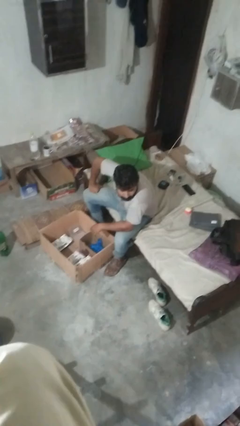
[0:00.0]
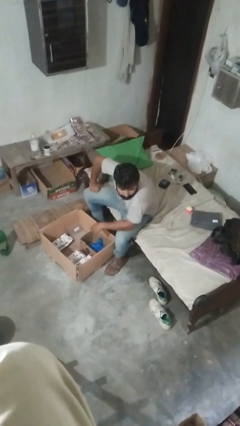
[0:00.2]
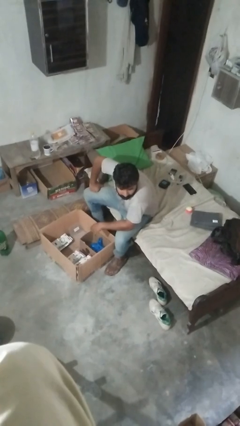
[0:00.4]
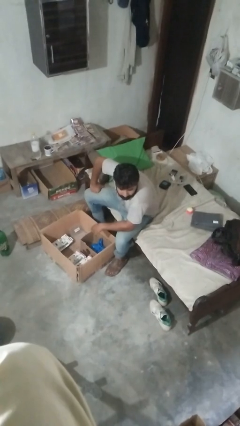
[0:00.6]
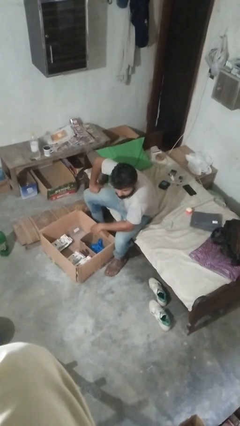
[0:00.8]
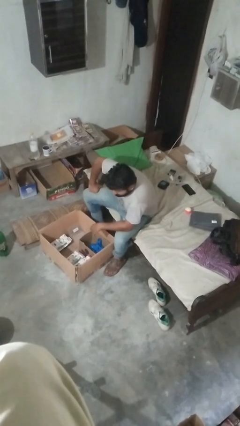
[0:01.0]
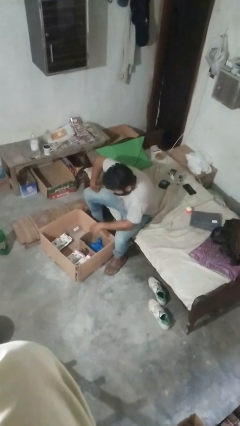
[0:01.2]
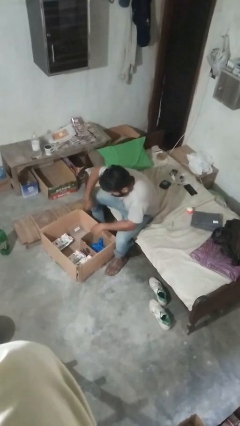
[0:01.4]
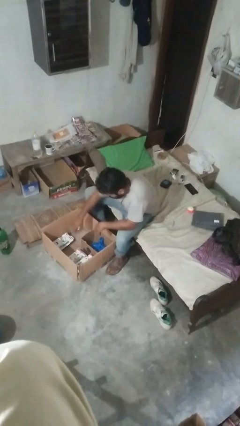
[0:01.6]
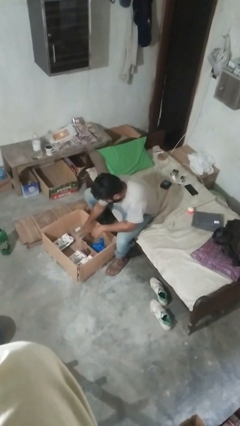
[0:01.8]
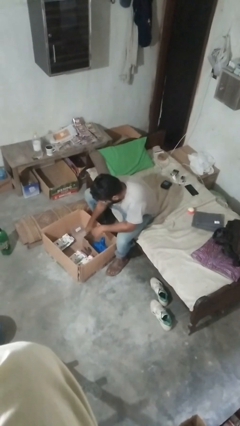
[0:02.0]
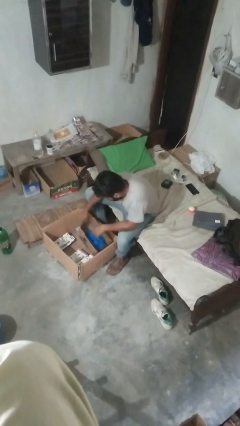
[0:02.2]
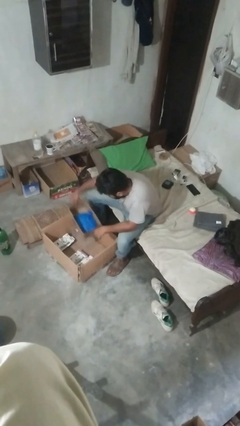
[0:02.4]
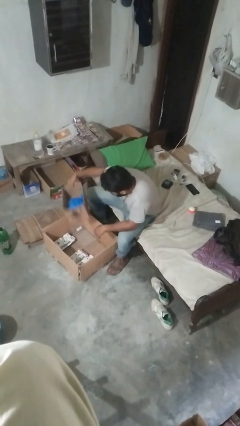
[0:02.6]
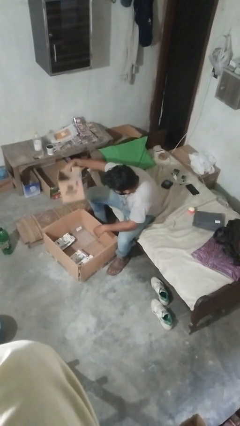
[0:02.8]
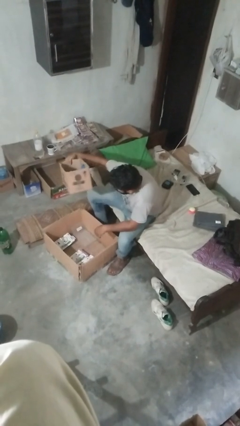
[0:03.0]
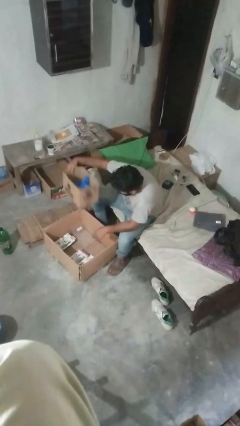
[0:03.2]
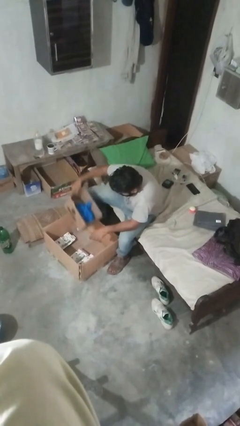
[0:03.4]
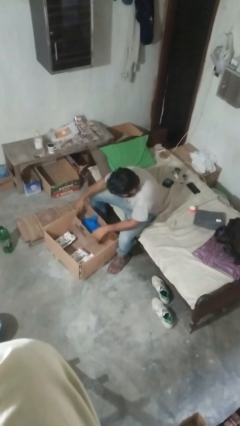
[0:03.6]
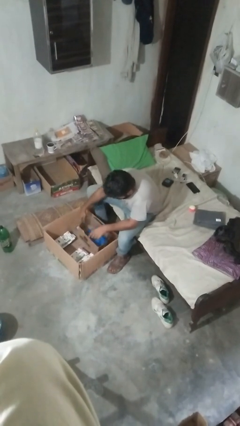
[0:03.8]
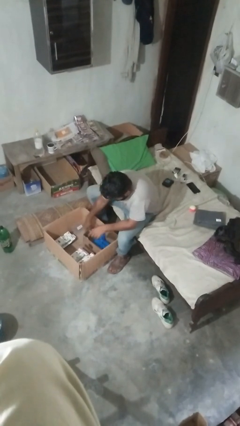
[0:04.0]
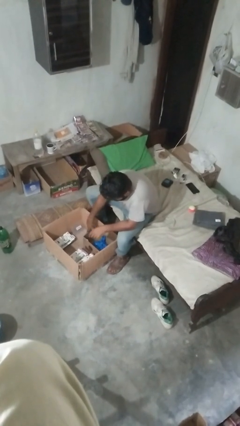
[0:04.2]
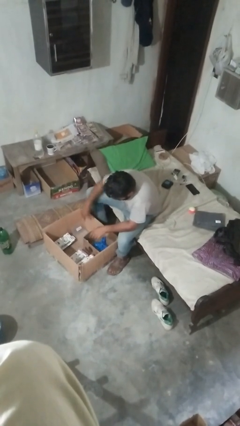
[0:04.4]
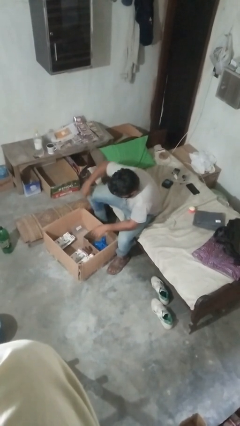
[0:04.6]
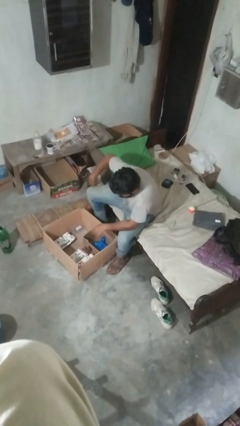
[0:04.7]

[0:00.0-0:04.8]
person searches in box

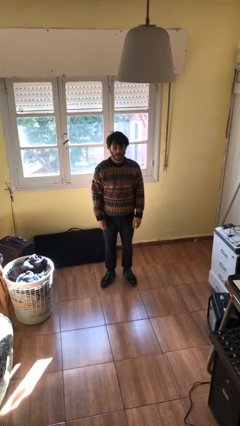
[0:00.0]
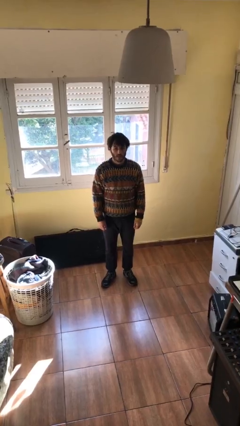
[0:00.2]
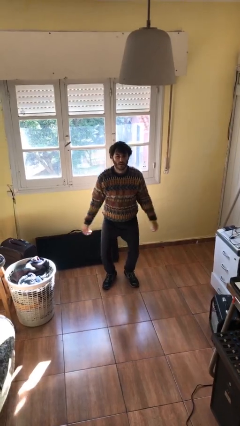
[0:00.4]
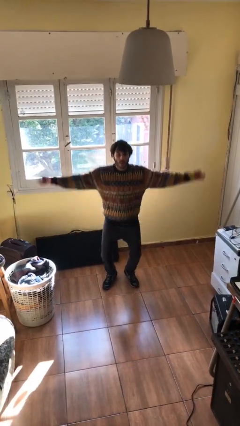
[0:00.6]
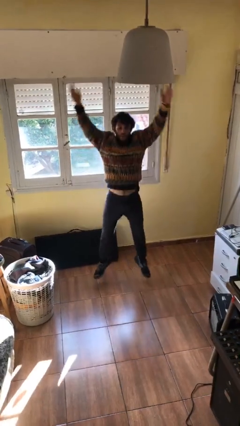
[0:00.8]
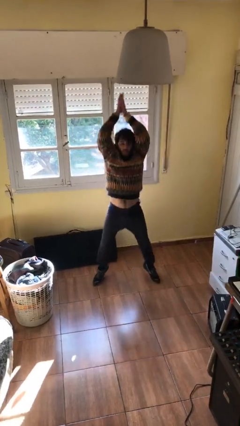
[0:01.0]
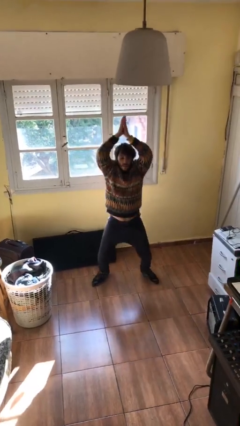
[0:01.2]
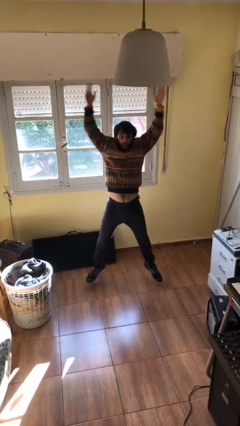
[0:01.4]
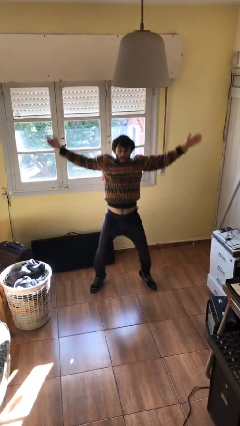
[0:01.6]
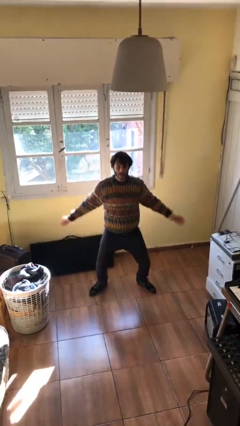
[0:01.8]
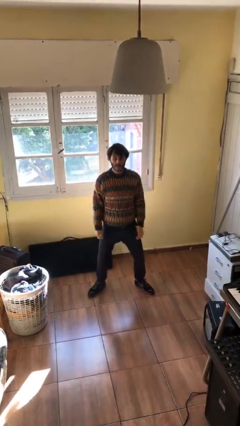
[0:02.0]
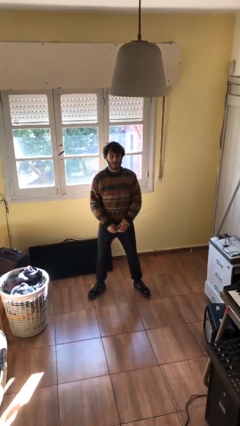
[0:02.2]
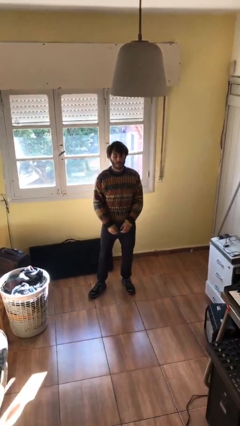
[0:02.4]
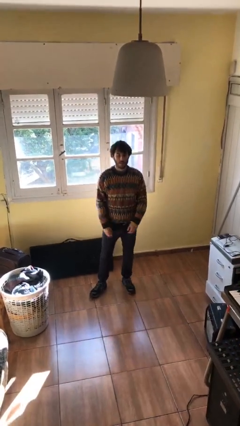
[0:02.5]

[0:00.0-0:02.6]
person exercises with lunges

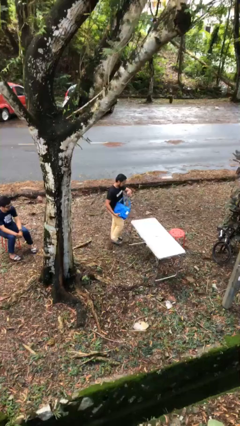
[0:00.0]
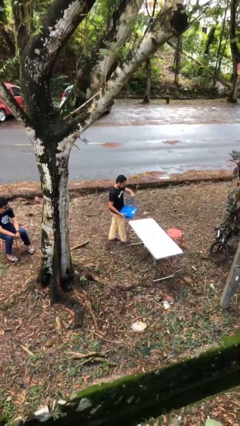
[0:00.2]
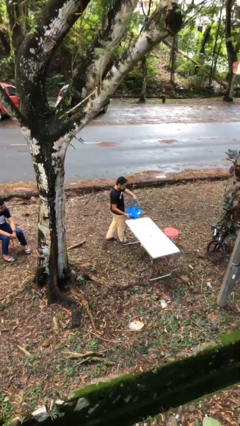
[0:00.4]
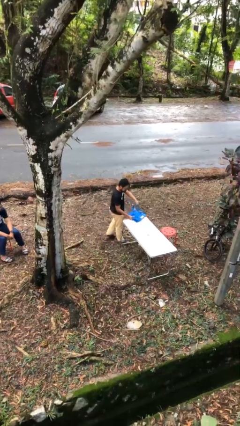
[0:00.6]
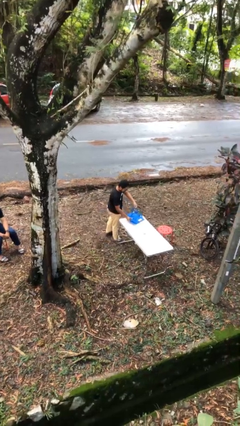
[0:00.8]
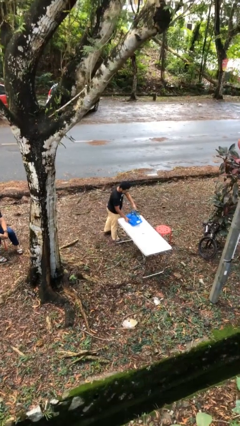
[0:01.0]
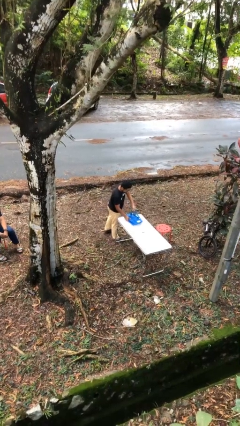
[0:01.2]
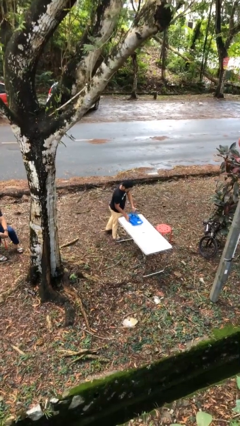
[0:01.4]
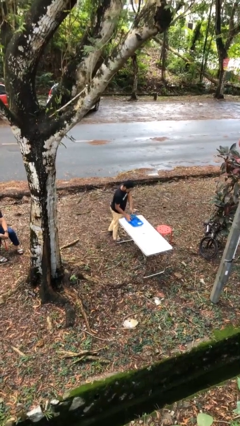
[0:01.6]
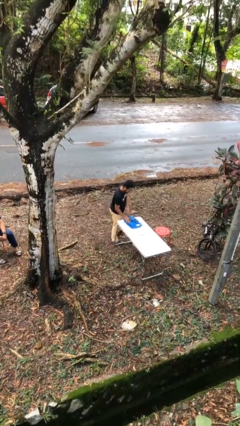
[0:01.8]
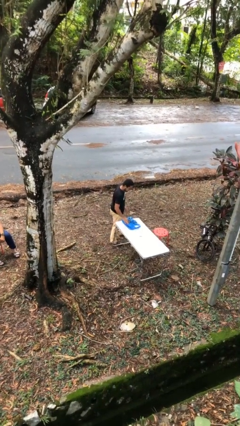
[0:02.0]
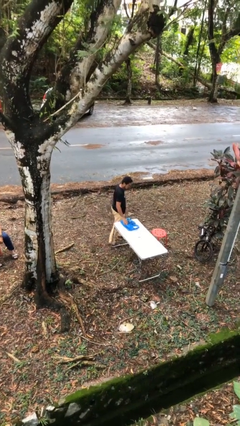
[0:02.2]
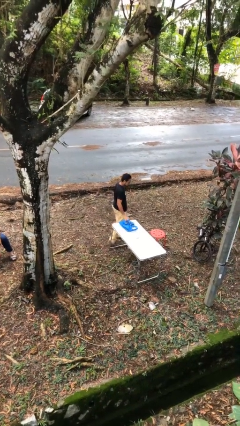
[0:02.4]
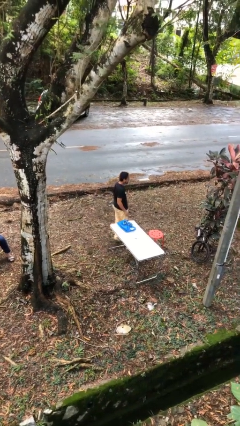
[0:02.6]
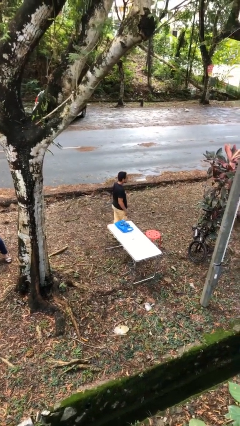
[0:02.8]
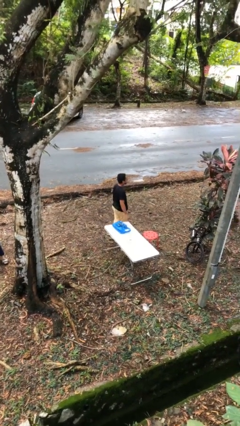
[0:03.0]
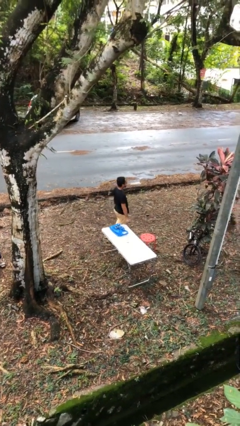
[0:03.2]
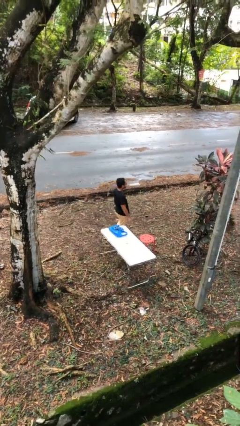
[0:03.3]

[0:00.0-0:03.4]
person puts down object on table

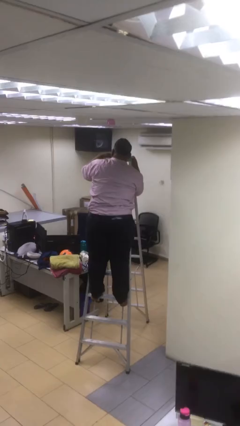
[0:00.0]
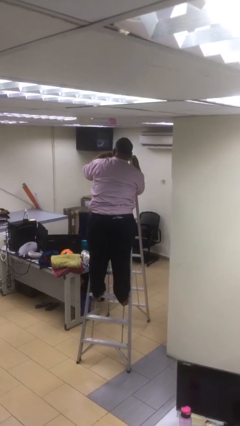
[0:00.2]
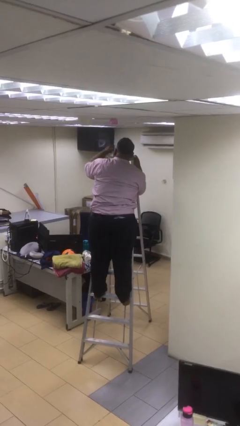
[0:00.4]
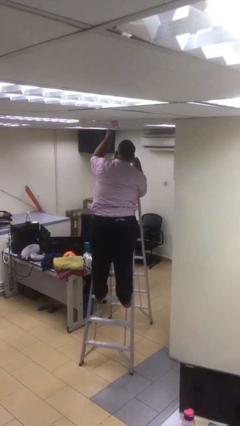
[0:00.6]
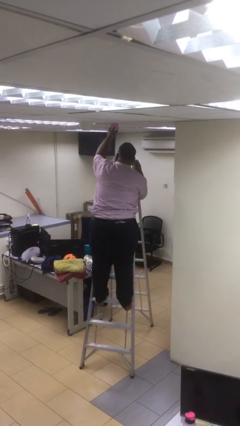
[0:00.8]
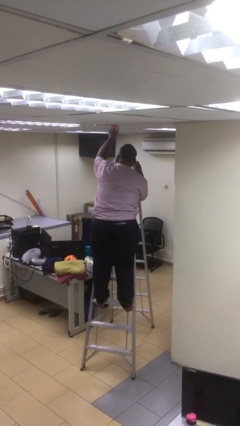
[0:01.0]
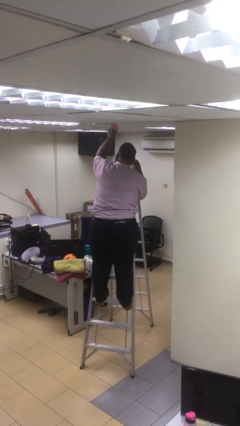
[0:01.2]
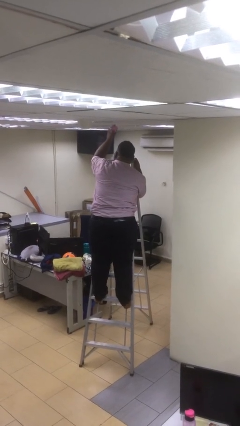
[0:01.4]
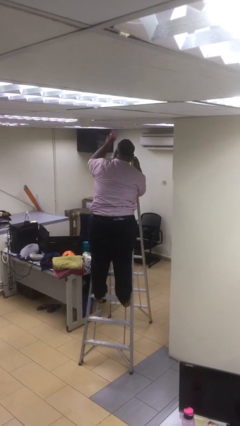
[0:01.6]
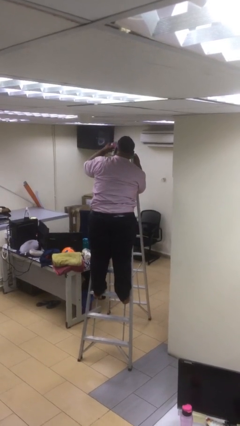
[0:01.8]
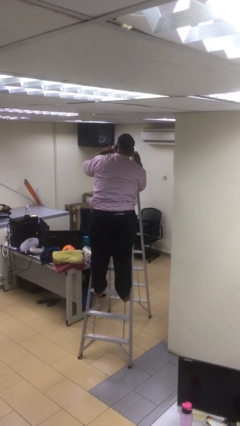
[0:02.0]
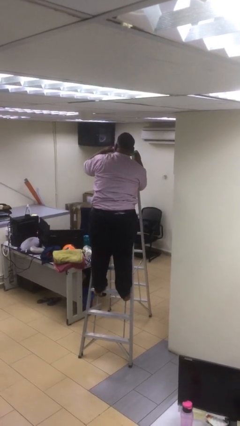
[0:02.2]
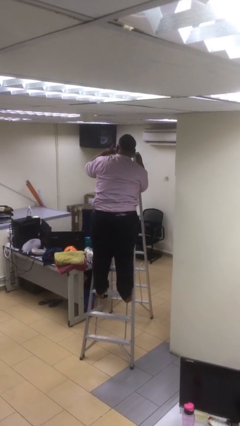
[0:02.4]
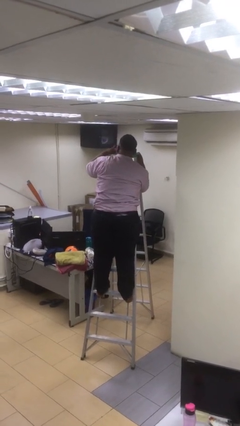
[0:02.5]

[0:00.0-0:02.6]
person takes down smoke detector

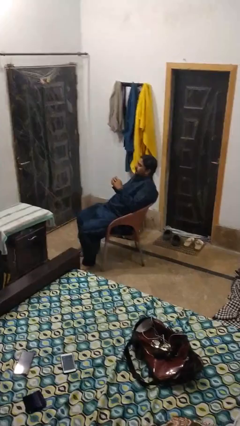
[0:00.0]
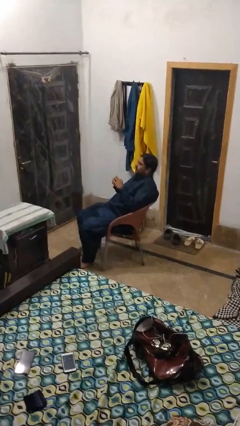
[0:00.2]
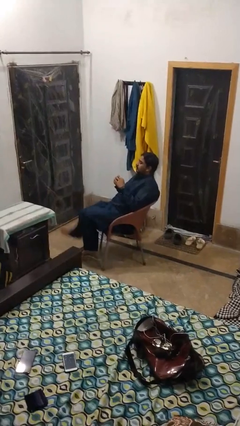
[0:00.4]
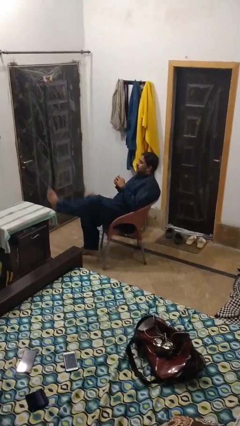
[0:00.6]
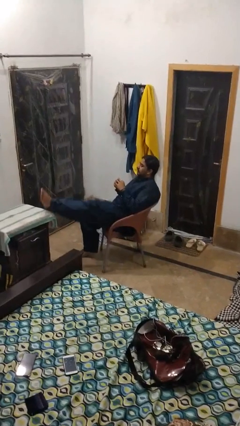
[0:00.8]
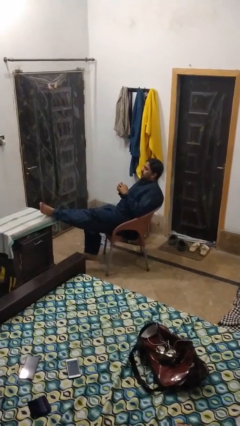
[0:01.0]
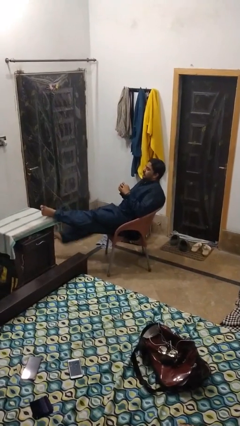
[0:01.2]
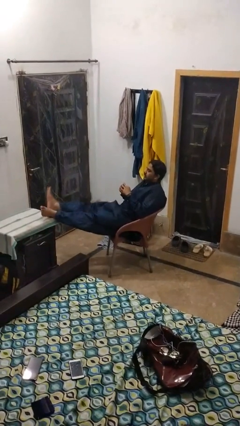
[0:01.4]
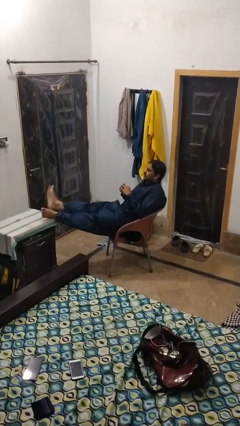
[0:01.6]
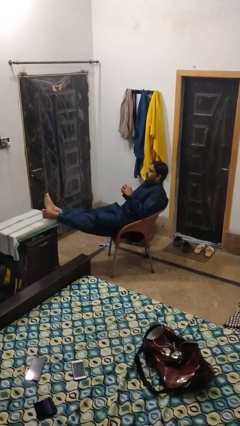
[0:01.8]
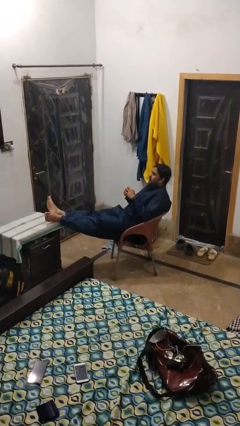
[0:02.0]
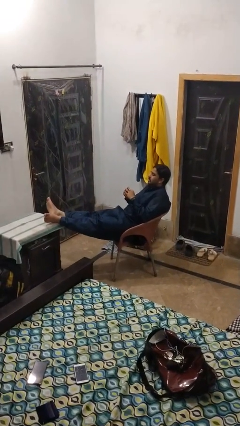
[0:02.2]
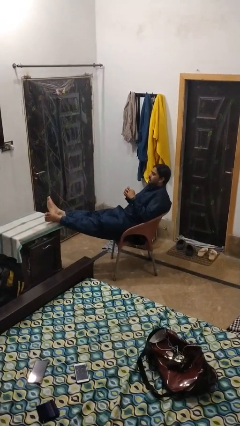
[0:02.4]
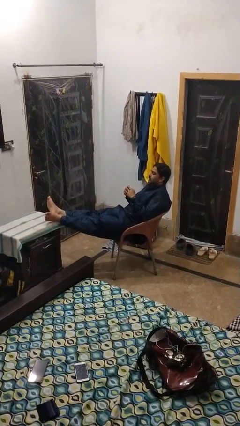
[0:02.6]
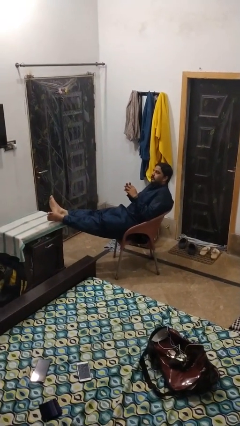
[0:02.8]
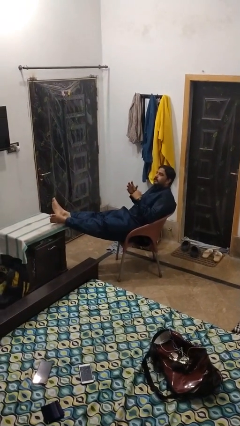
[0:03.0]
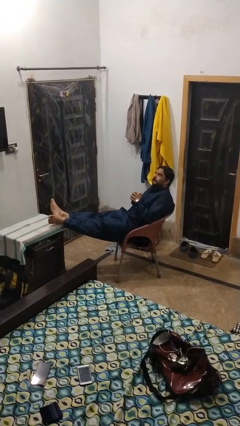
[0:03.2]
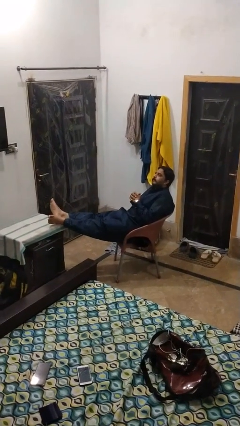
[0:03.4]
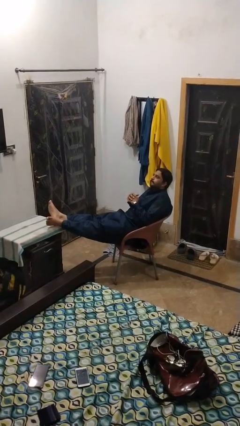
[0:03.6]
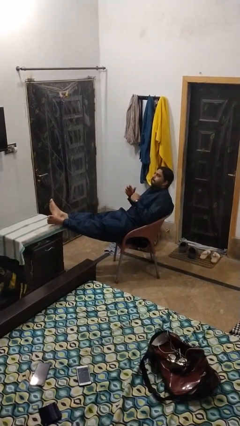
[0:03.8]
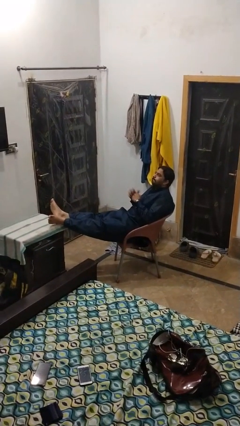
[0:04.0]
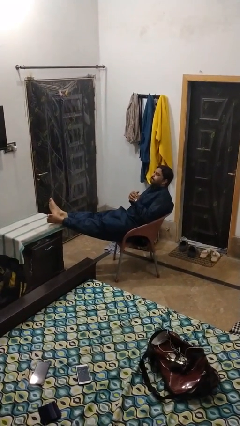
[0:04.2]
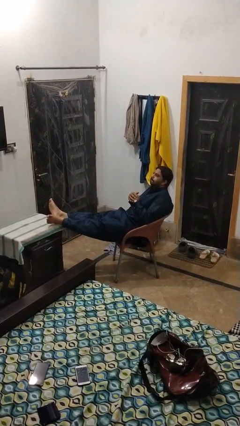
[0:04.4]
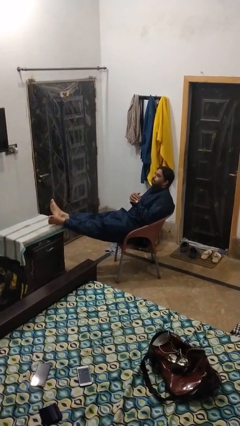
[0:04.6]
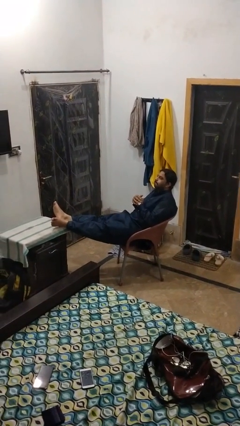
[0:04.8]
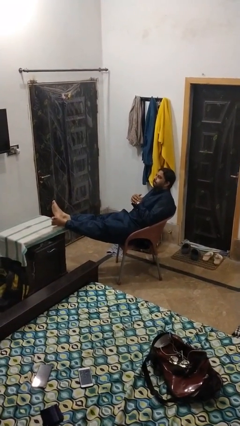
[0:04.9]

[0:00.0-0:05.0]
person puts feet up
